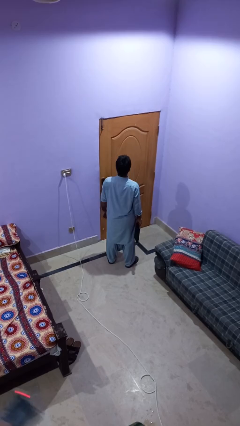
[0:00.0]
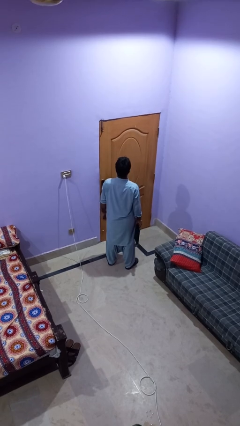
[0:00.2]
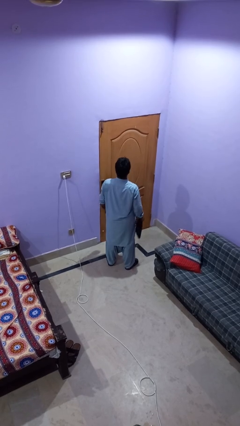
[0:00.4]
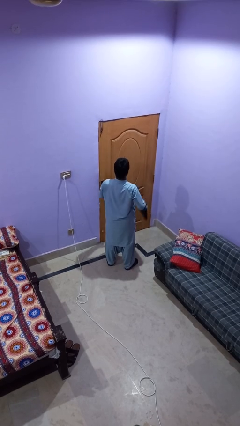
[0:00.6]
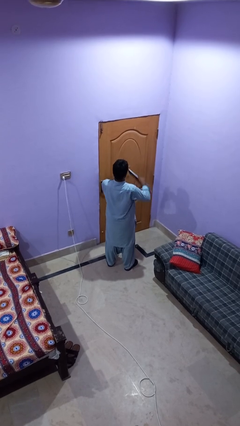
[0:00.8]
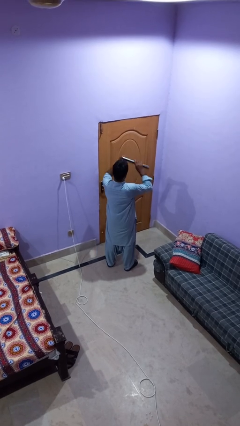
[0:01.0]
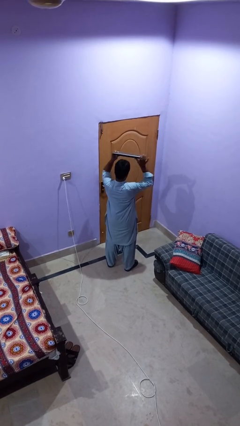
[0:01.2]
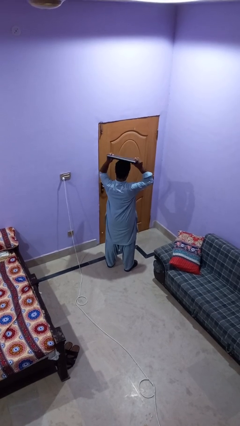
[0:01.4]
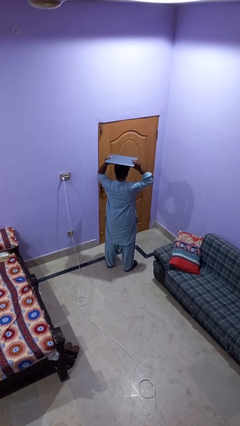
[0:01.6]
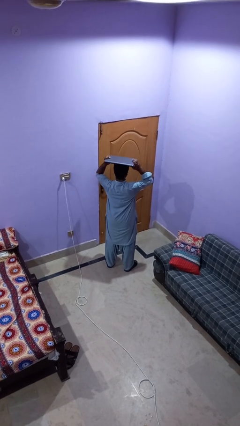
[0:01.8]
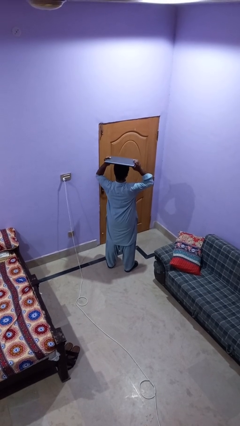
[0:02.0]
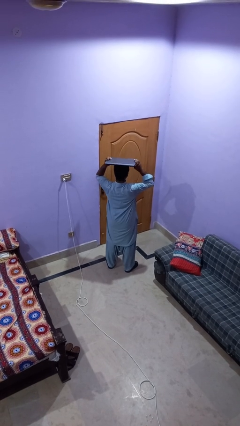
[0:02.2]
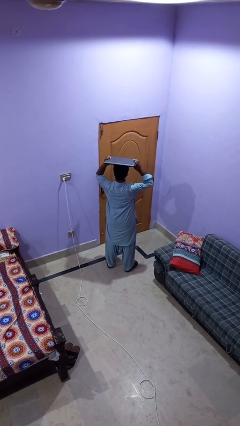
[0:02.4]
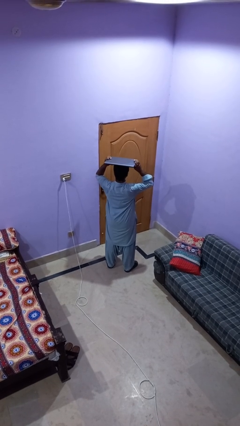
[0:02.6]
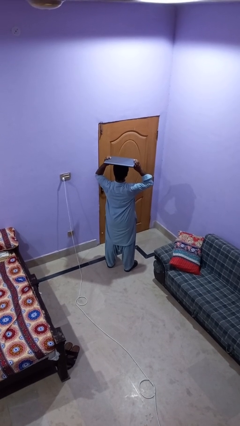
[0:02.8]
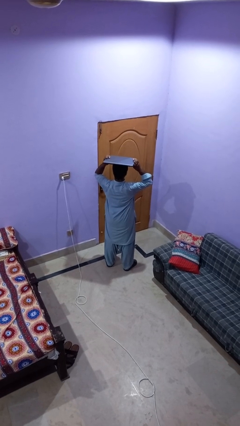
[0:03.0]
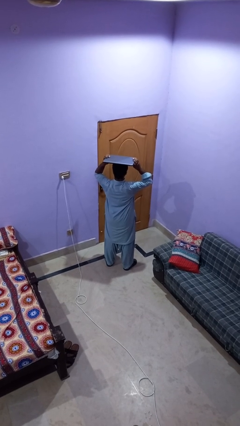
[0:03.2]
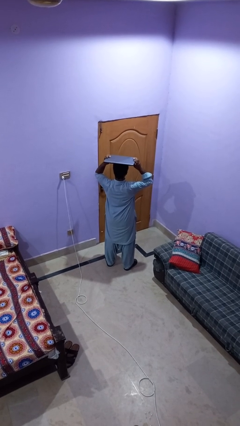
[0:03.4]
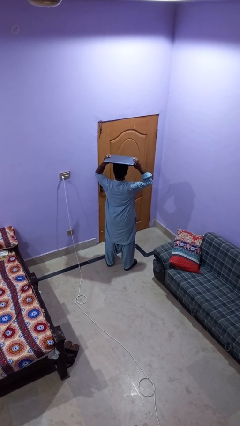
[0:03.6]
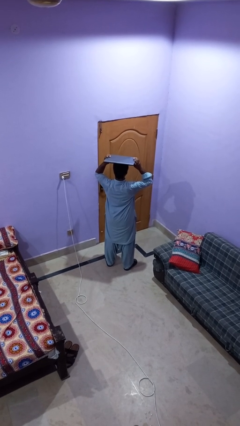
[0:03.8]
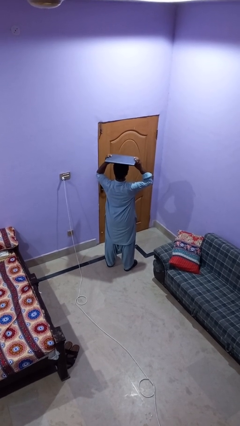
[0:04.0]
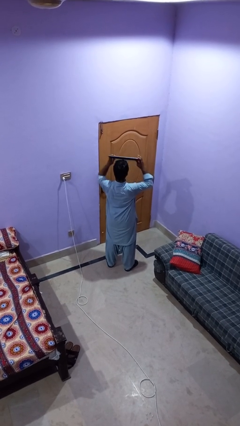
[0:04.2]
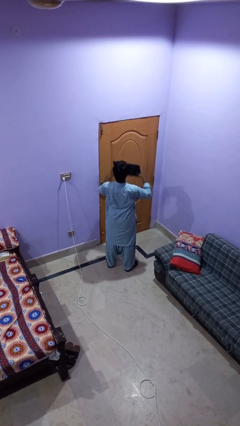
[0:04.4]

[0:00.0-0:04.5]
person holds object above head

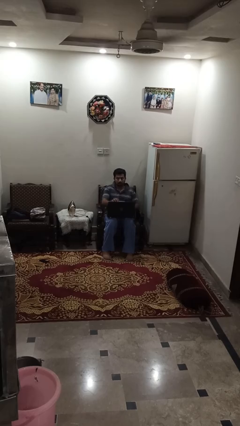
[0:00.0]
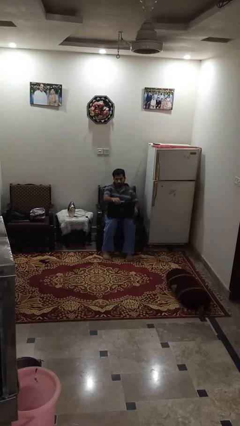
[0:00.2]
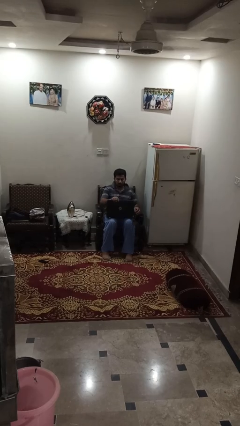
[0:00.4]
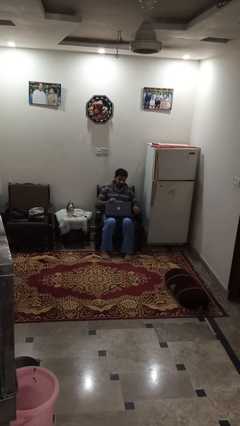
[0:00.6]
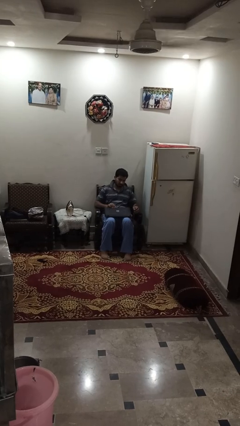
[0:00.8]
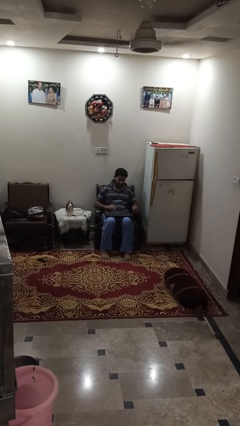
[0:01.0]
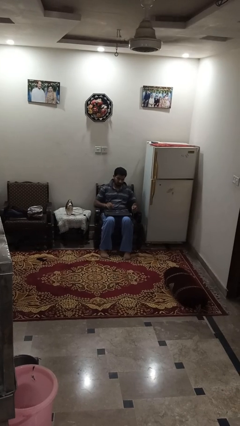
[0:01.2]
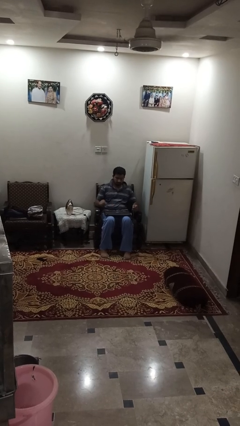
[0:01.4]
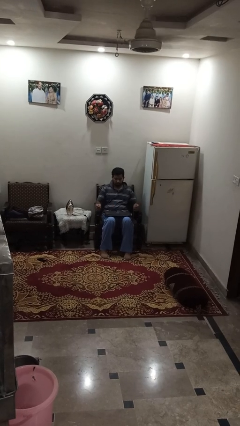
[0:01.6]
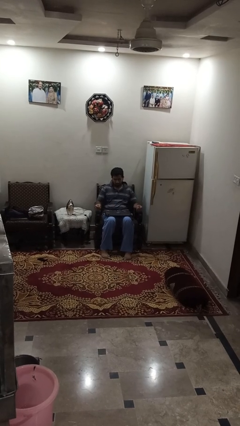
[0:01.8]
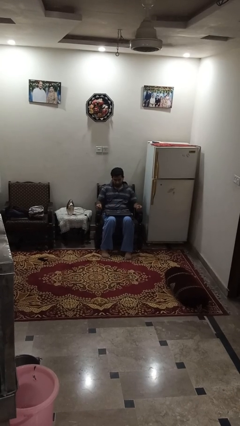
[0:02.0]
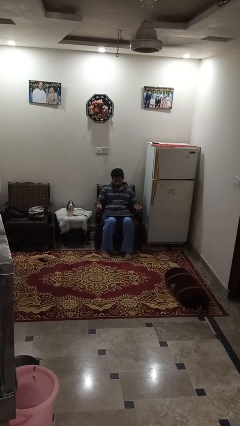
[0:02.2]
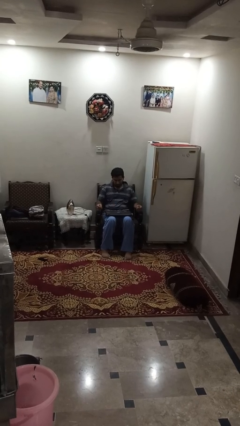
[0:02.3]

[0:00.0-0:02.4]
person closes laptop

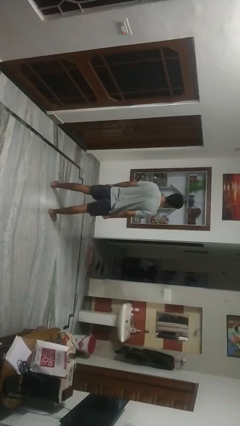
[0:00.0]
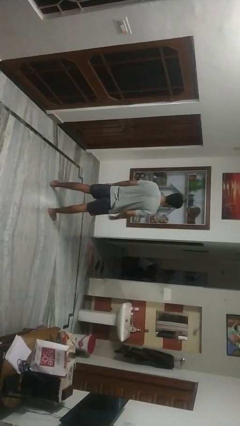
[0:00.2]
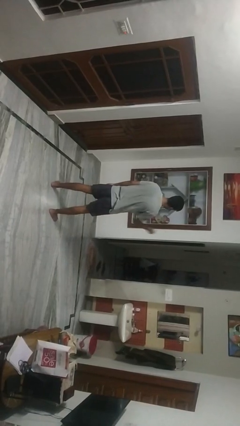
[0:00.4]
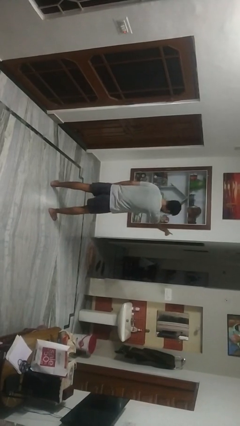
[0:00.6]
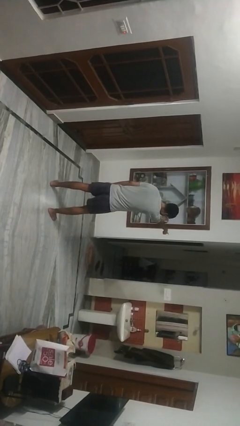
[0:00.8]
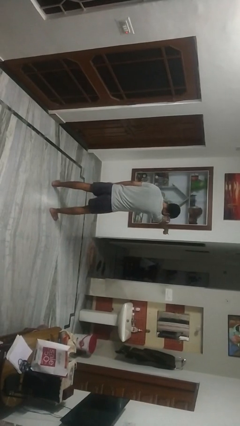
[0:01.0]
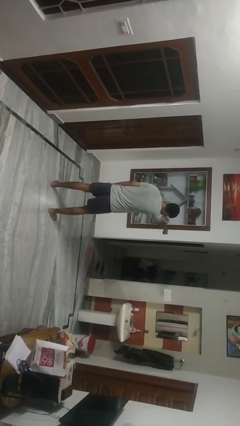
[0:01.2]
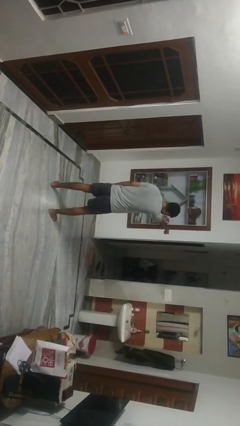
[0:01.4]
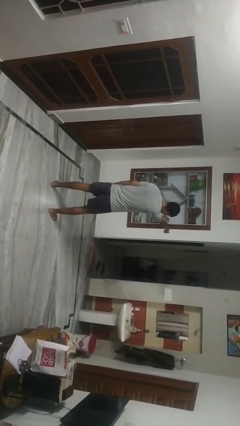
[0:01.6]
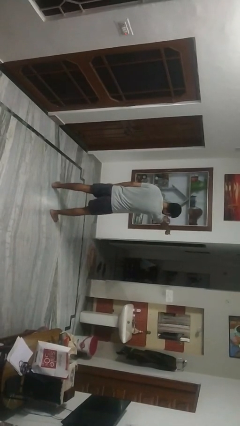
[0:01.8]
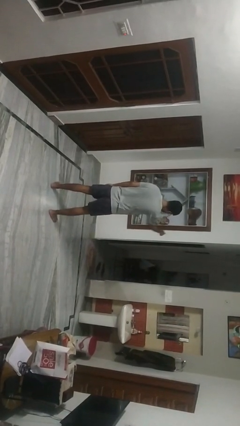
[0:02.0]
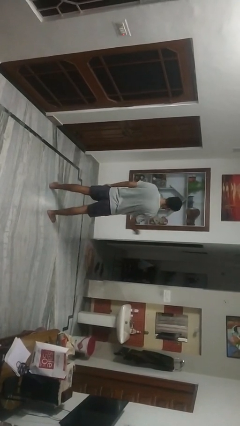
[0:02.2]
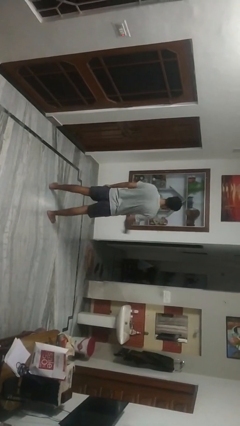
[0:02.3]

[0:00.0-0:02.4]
person points at person

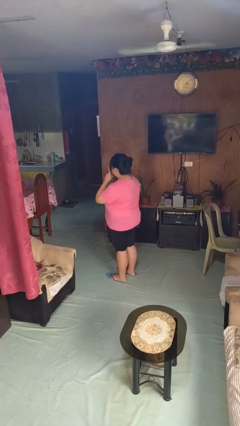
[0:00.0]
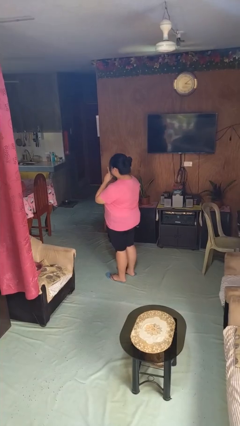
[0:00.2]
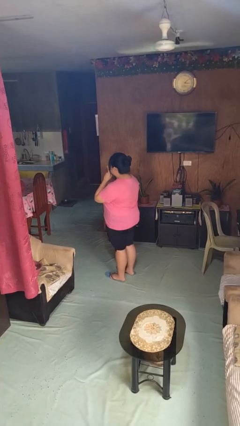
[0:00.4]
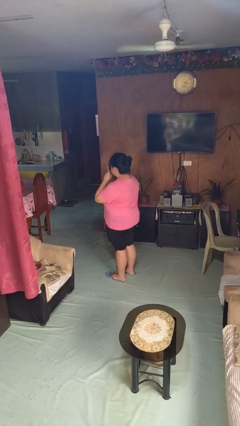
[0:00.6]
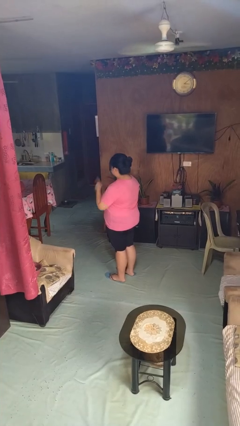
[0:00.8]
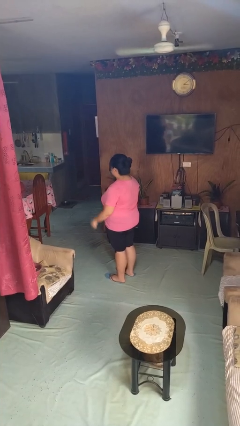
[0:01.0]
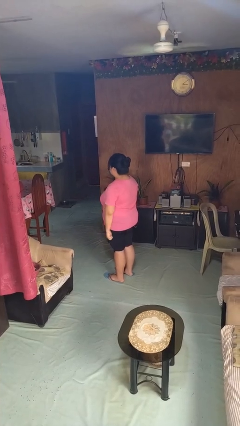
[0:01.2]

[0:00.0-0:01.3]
person gestures be quiet

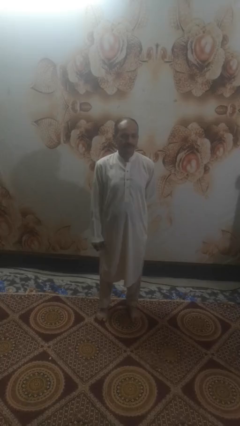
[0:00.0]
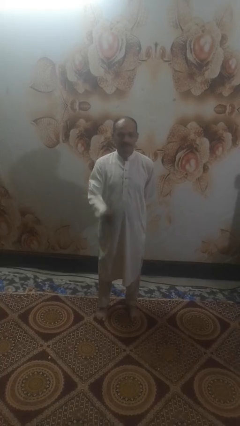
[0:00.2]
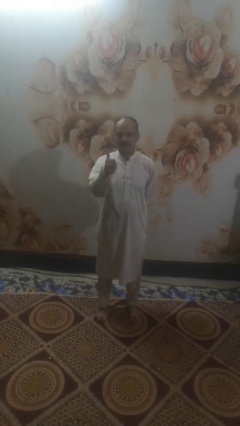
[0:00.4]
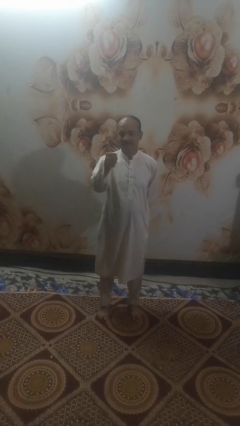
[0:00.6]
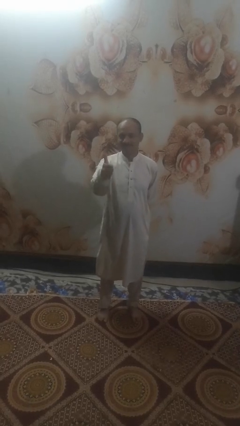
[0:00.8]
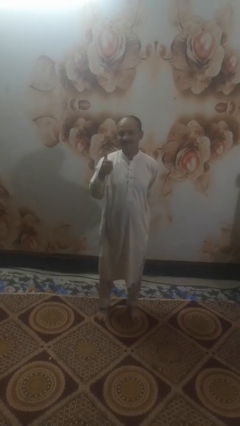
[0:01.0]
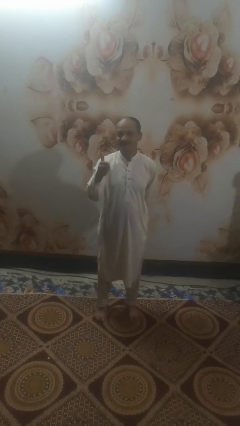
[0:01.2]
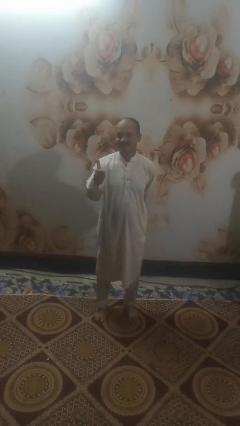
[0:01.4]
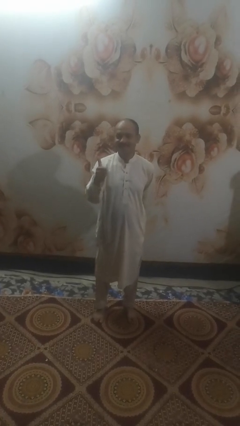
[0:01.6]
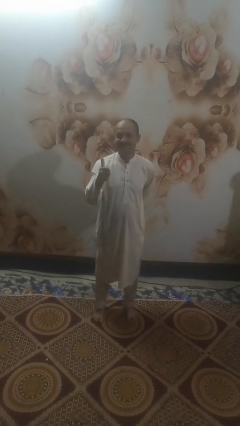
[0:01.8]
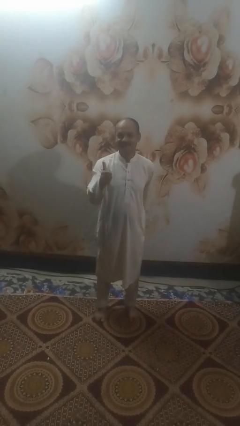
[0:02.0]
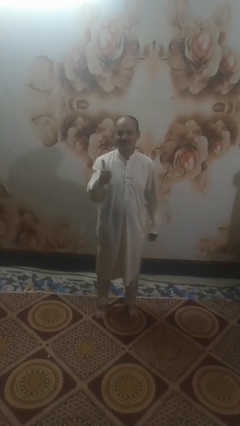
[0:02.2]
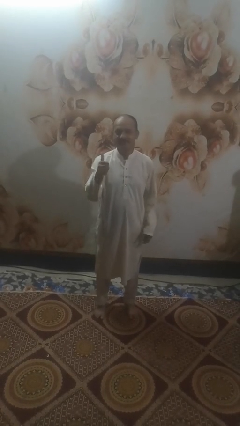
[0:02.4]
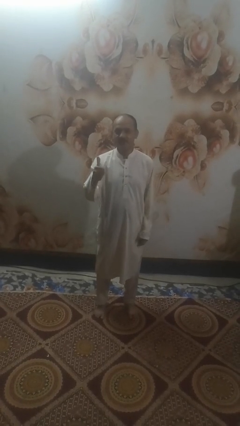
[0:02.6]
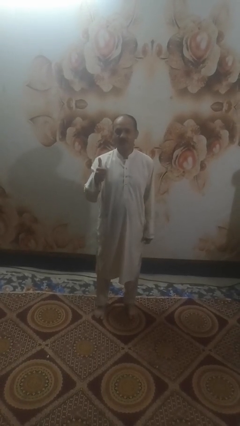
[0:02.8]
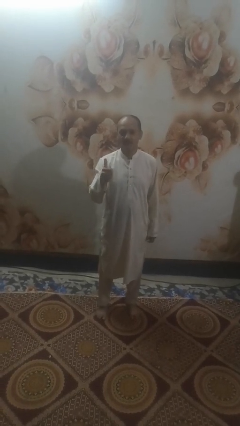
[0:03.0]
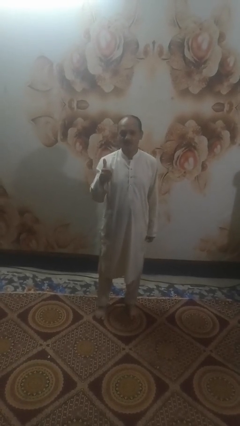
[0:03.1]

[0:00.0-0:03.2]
person gestures thumbs up

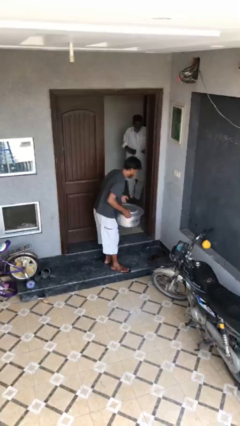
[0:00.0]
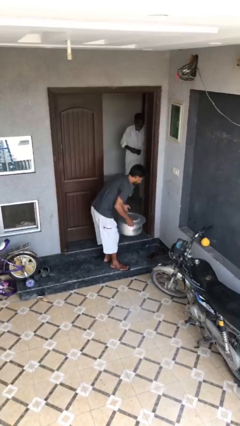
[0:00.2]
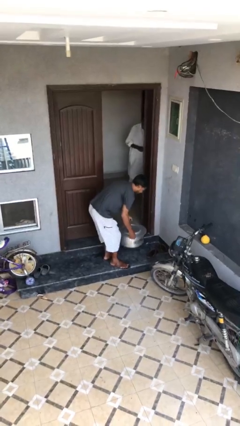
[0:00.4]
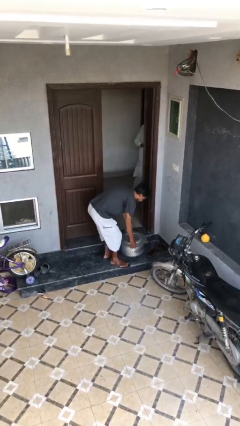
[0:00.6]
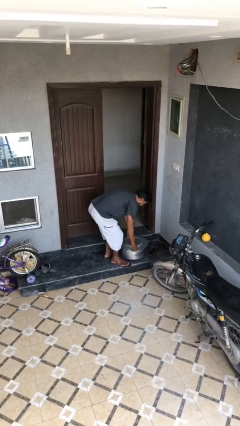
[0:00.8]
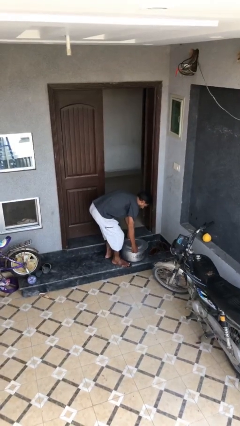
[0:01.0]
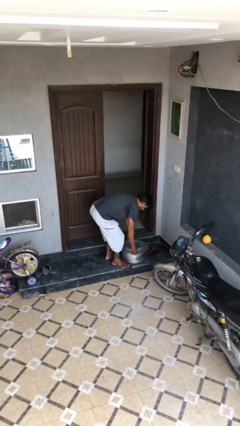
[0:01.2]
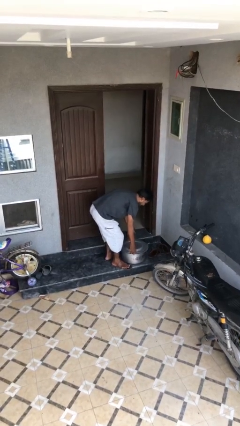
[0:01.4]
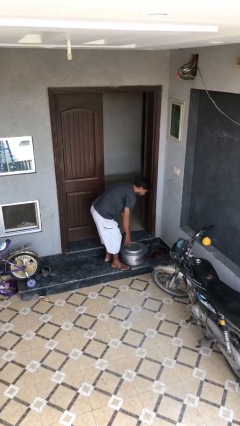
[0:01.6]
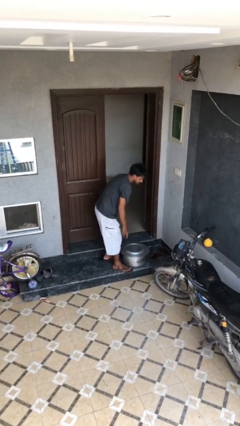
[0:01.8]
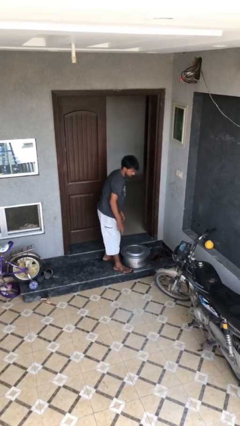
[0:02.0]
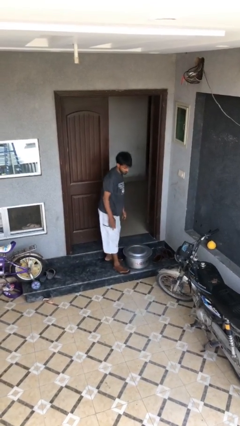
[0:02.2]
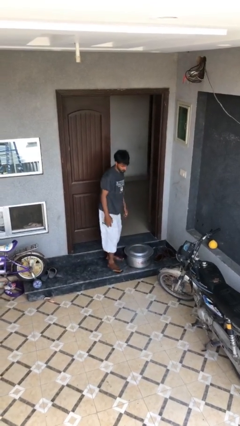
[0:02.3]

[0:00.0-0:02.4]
person puts down object on floor

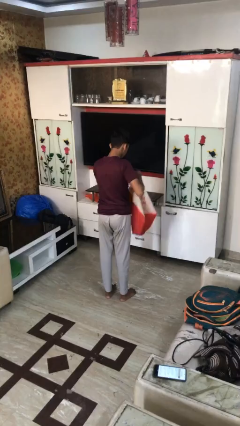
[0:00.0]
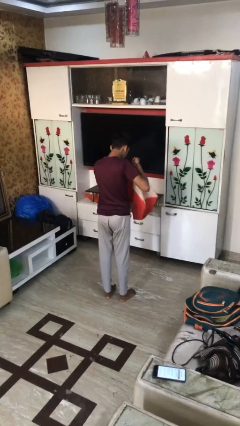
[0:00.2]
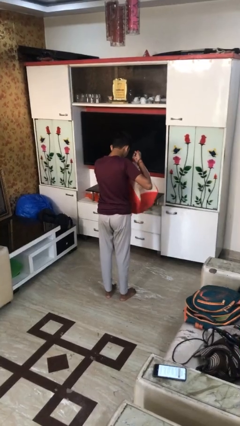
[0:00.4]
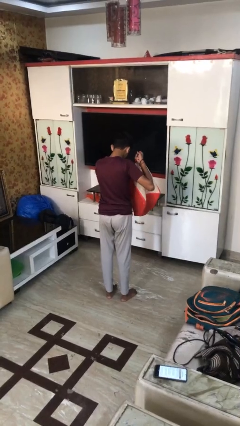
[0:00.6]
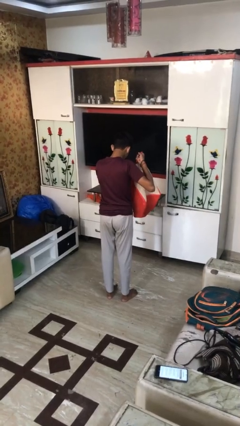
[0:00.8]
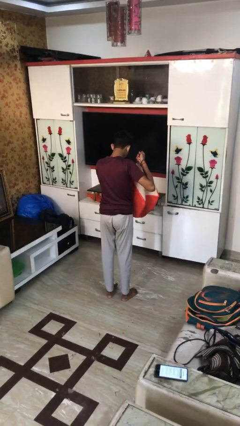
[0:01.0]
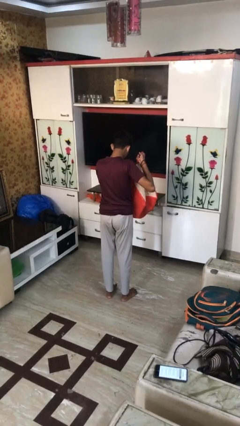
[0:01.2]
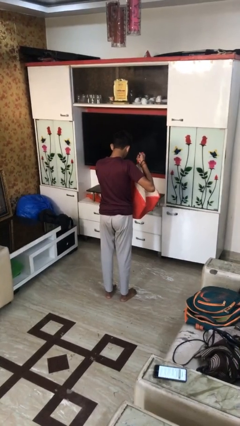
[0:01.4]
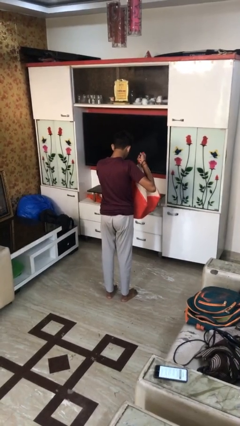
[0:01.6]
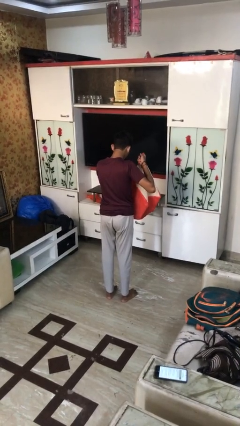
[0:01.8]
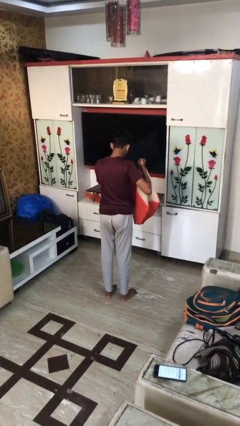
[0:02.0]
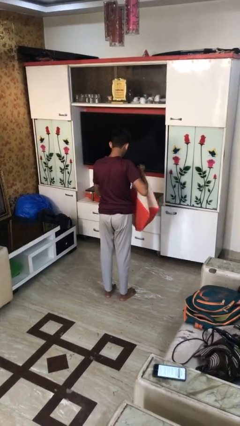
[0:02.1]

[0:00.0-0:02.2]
person searches in bag
